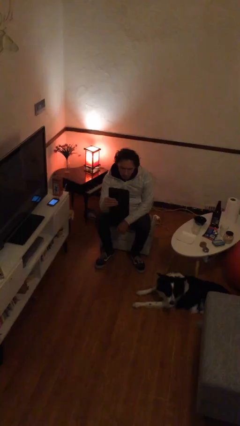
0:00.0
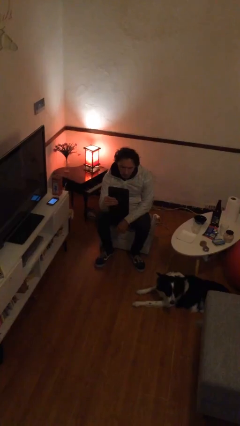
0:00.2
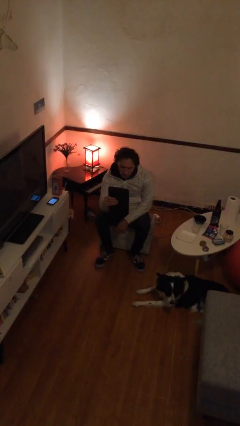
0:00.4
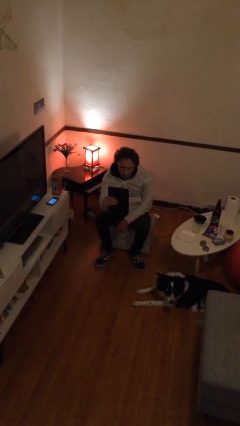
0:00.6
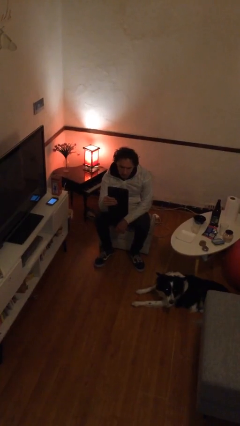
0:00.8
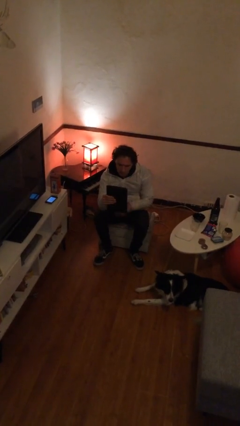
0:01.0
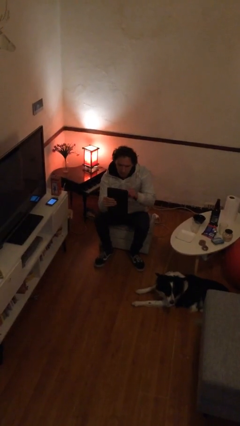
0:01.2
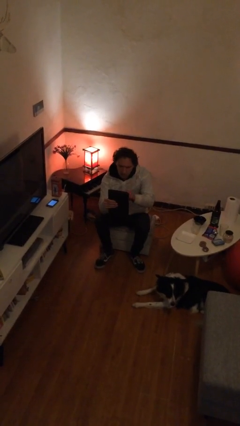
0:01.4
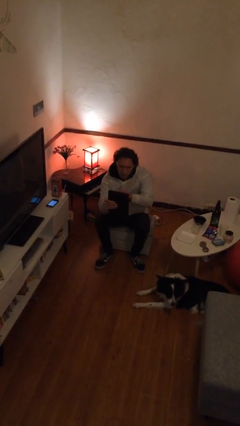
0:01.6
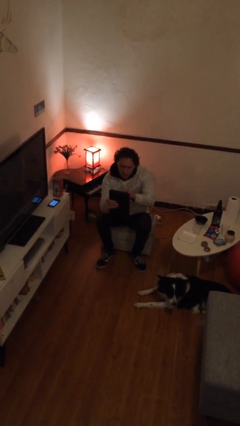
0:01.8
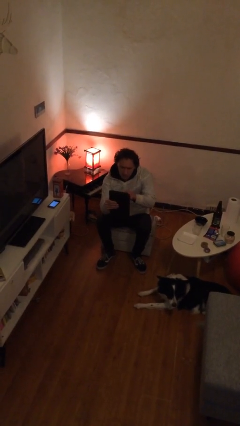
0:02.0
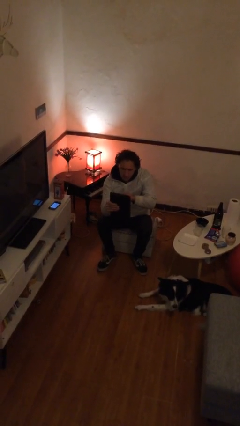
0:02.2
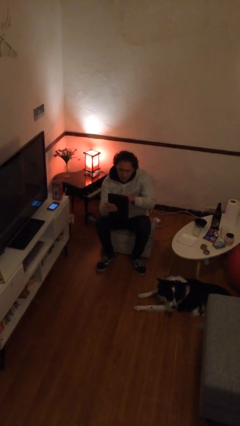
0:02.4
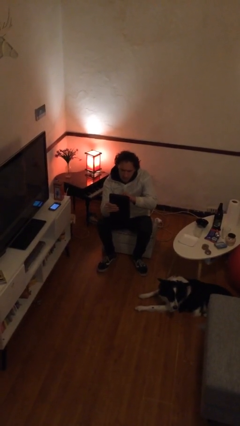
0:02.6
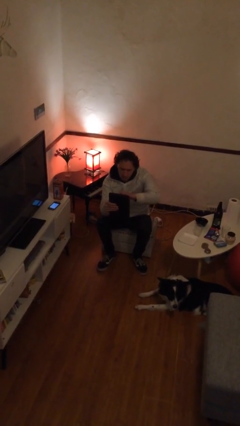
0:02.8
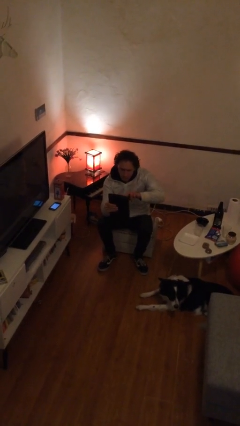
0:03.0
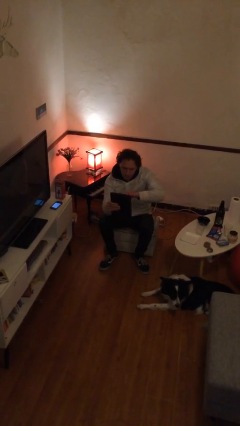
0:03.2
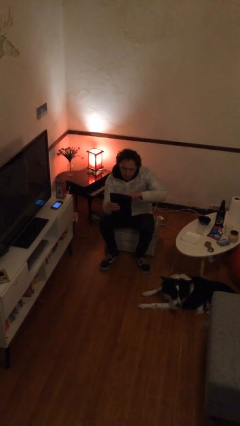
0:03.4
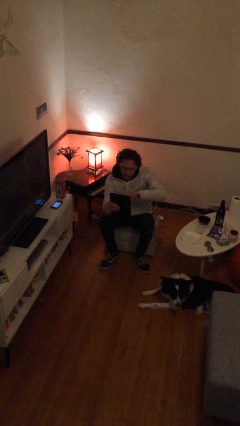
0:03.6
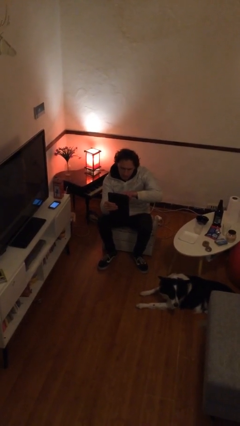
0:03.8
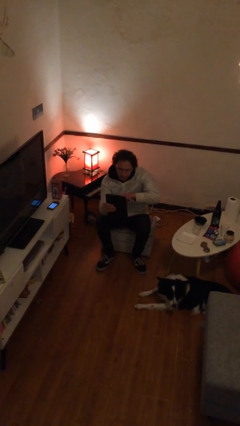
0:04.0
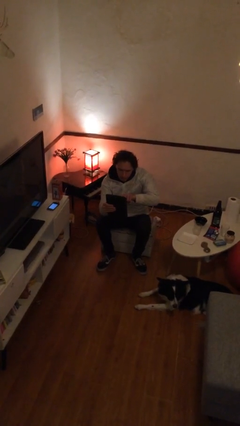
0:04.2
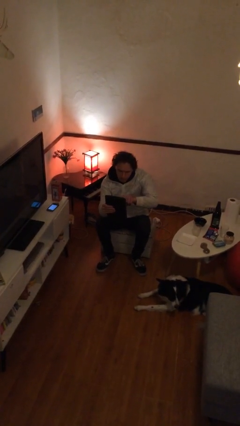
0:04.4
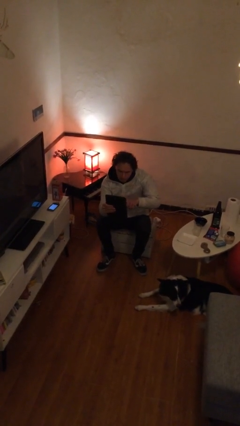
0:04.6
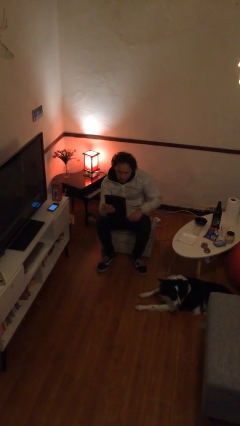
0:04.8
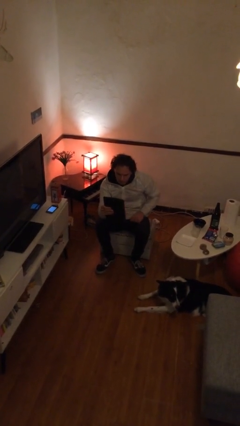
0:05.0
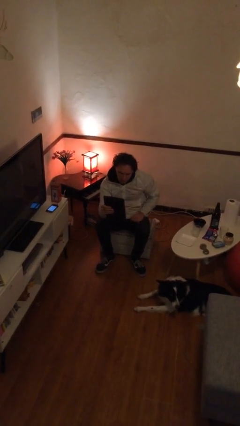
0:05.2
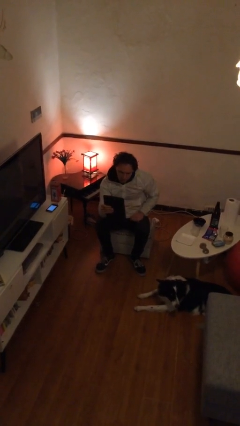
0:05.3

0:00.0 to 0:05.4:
person interacts with tablet

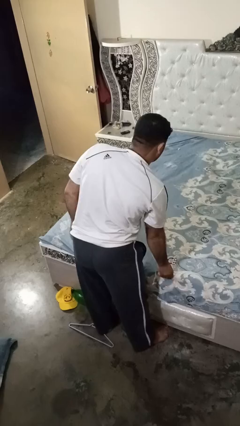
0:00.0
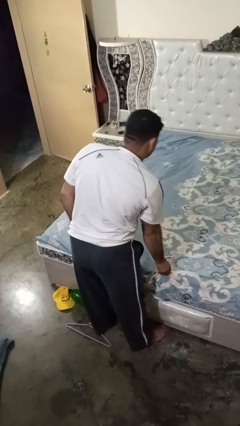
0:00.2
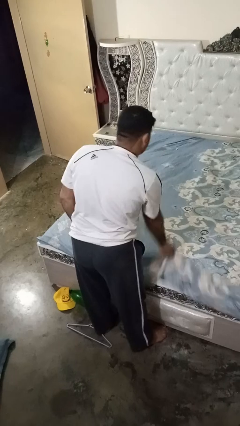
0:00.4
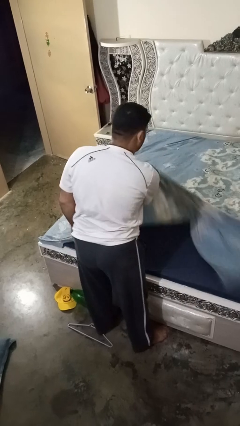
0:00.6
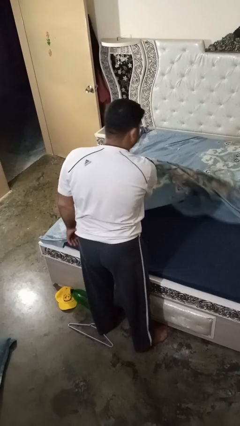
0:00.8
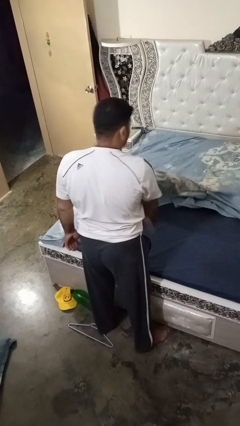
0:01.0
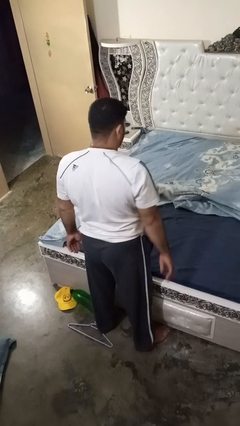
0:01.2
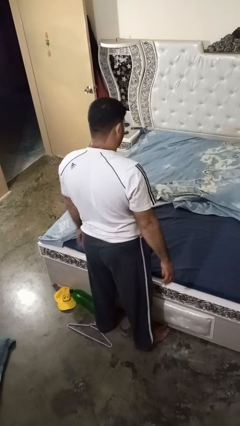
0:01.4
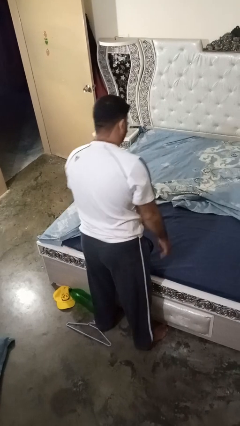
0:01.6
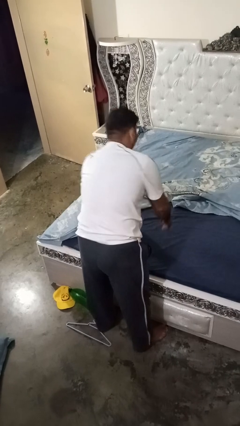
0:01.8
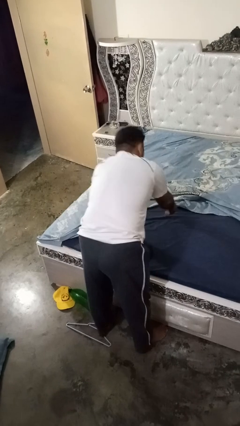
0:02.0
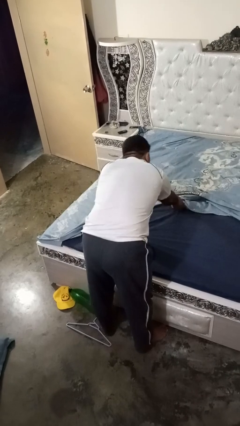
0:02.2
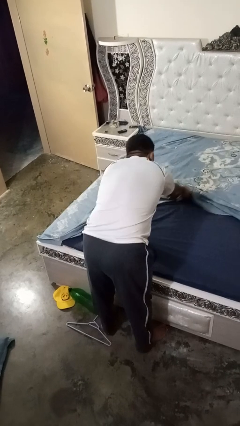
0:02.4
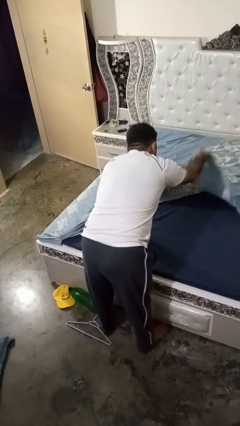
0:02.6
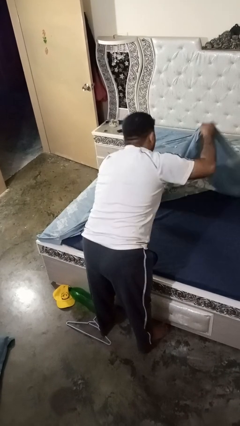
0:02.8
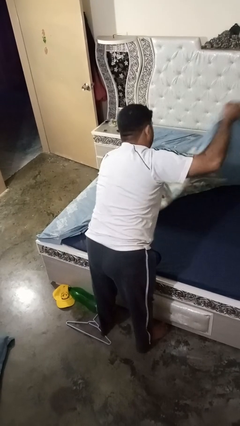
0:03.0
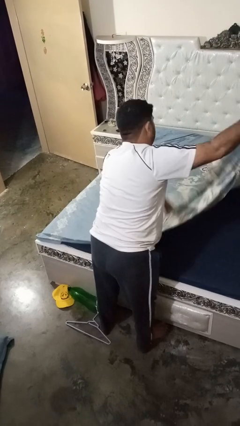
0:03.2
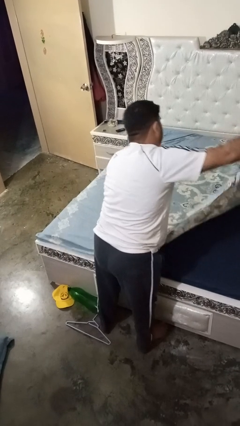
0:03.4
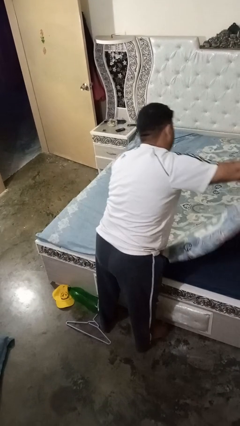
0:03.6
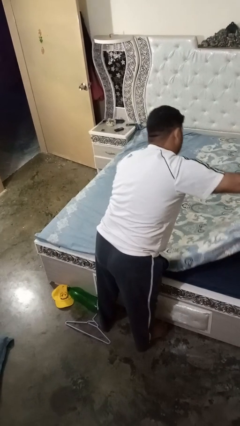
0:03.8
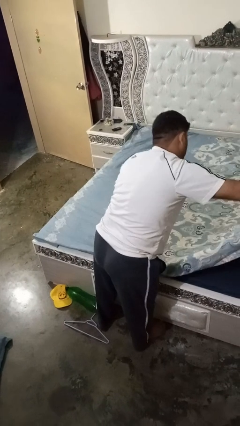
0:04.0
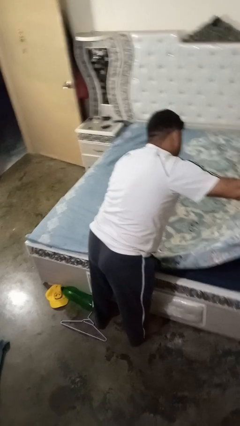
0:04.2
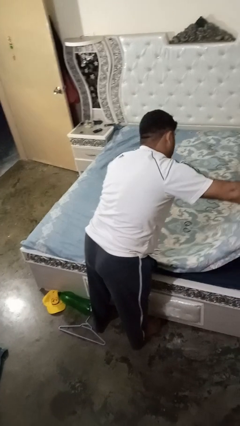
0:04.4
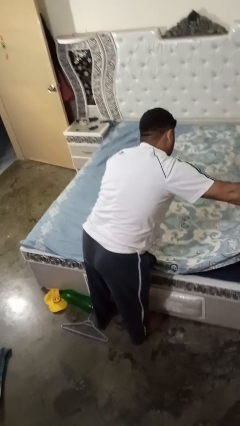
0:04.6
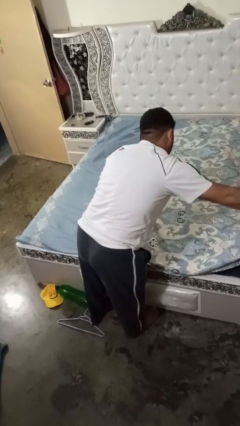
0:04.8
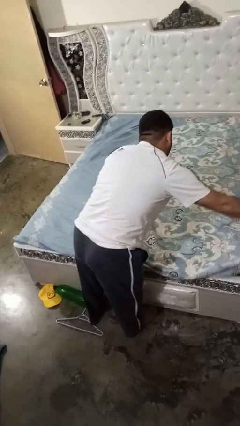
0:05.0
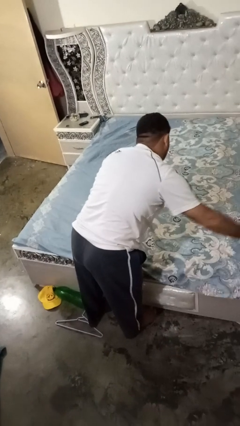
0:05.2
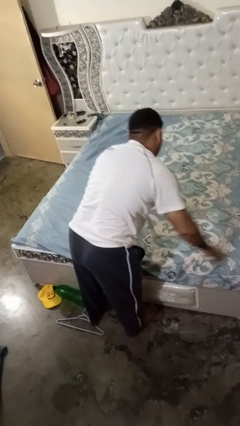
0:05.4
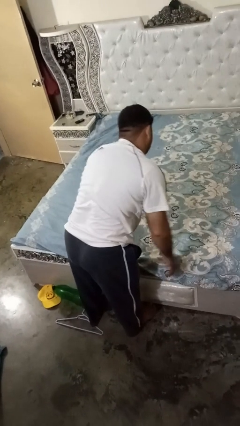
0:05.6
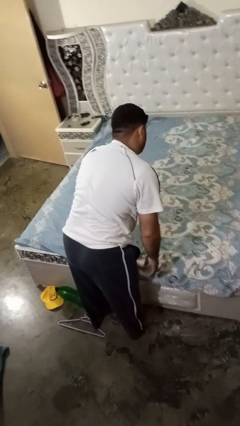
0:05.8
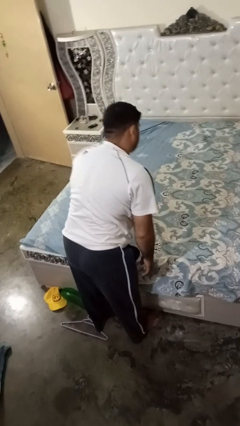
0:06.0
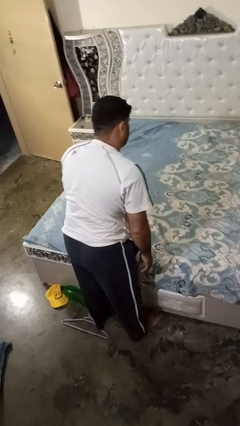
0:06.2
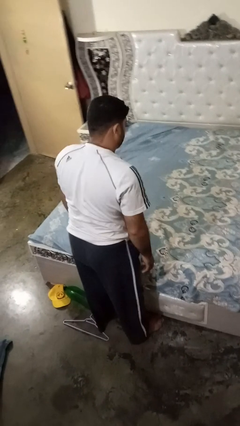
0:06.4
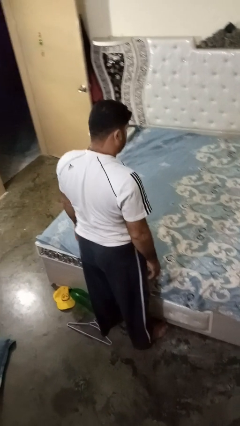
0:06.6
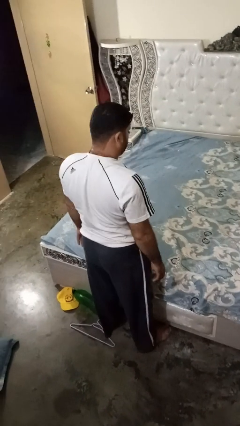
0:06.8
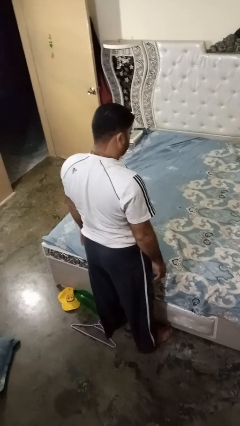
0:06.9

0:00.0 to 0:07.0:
person makes bed

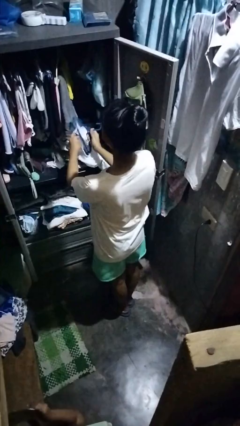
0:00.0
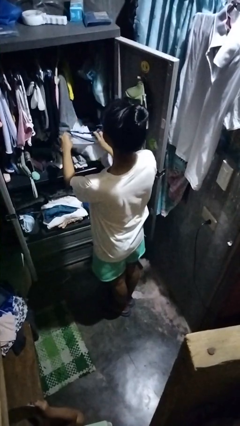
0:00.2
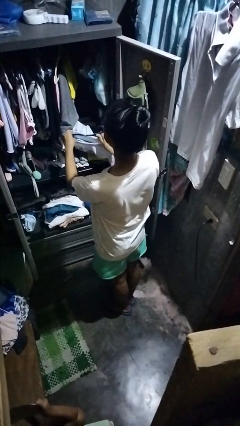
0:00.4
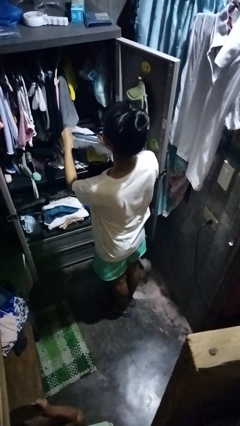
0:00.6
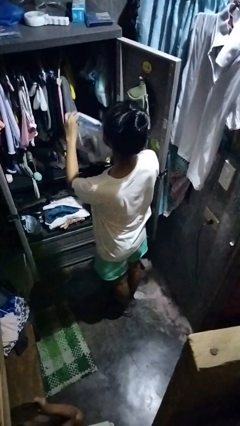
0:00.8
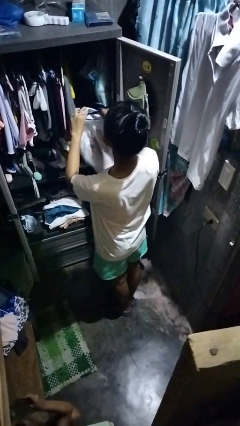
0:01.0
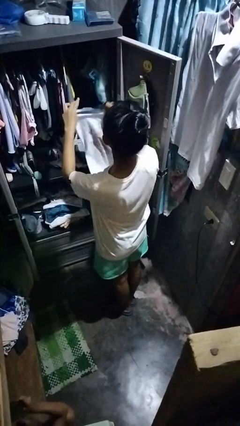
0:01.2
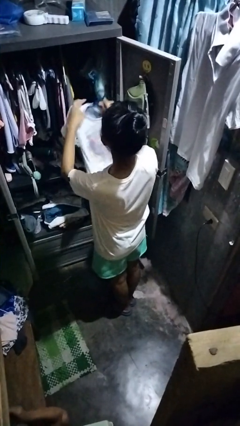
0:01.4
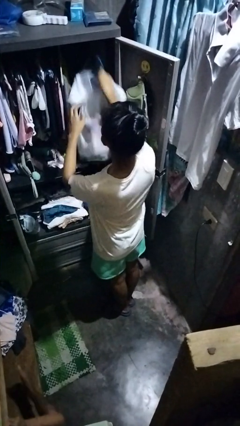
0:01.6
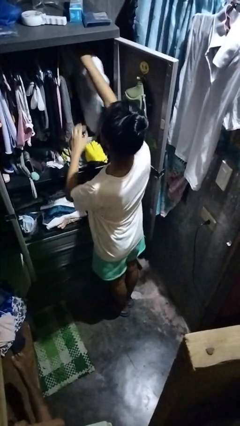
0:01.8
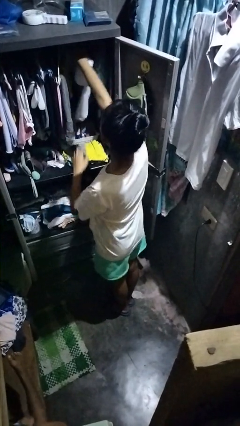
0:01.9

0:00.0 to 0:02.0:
person puts clothes into closet

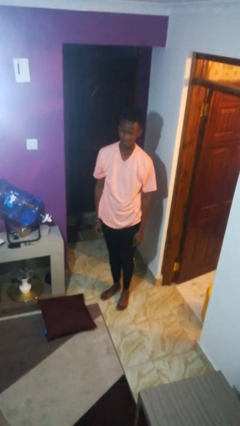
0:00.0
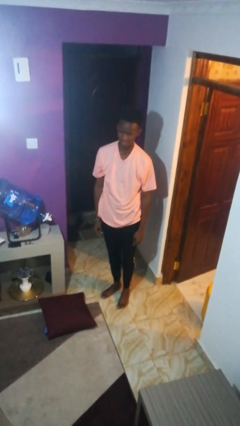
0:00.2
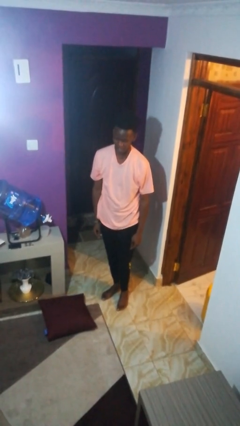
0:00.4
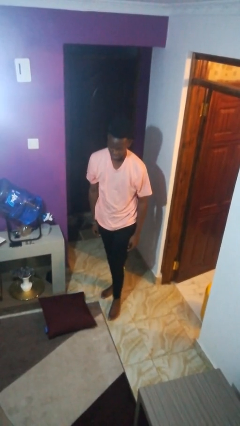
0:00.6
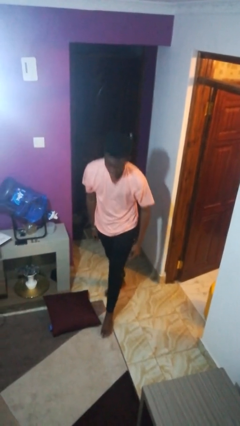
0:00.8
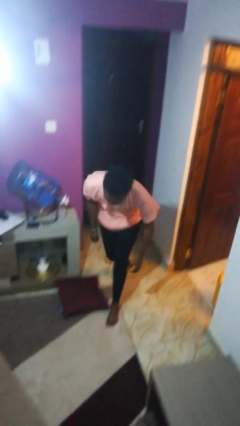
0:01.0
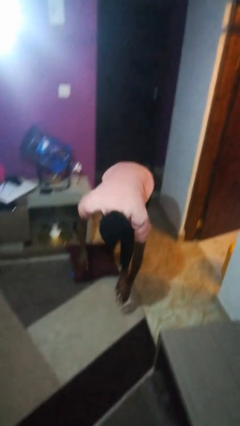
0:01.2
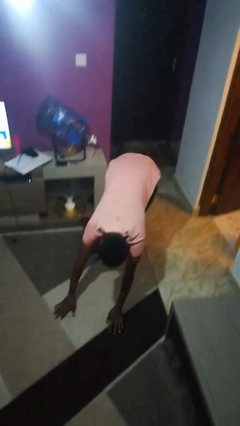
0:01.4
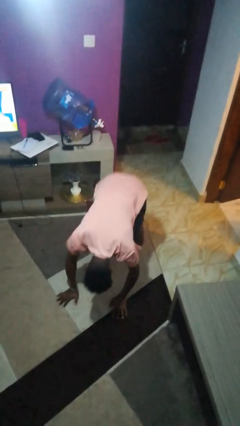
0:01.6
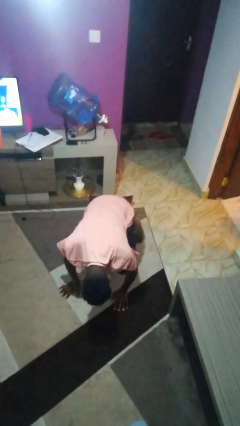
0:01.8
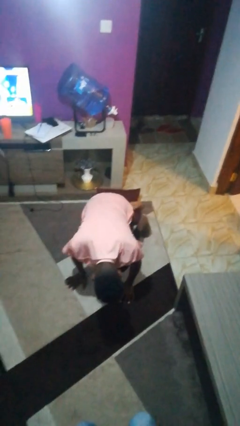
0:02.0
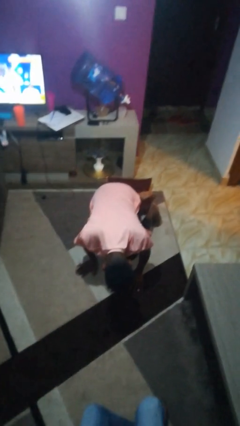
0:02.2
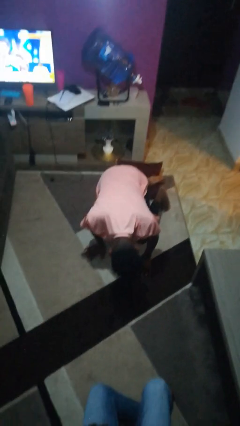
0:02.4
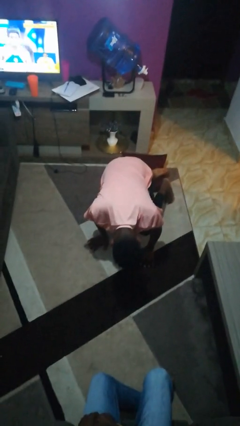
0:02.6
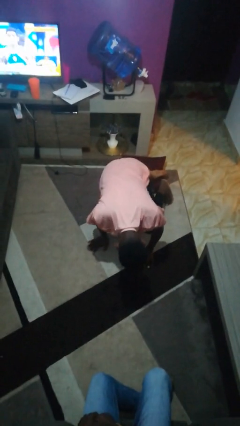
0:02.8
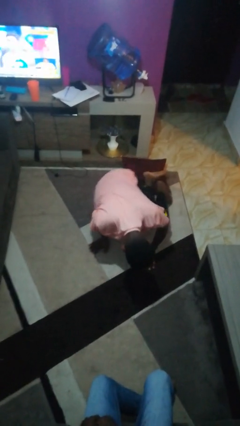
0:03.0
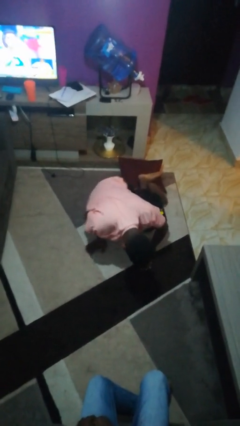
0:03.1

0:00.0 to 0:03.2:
person trips on object on floor
